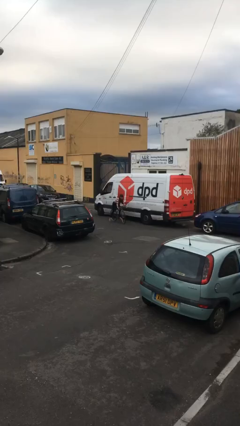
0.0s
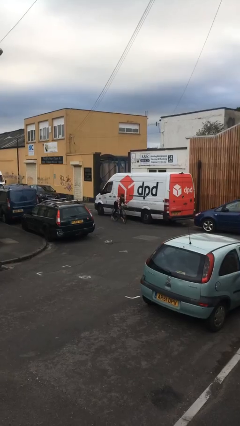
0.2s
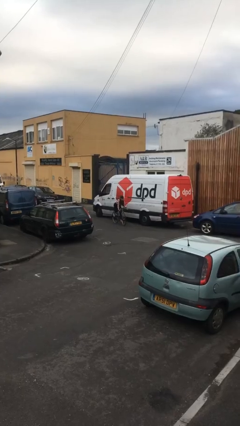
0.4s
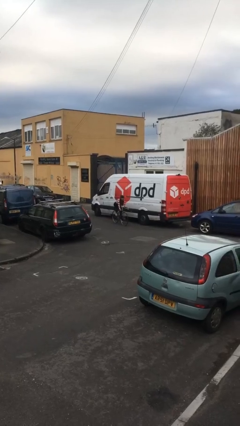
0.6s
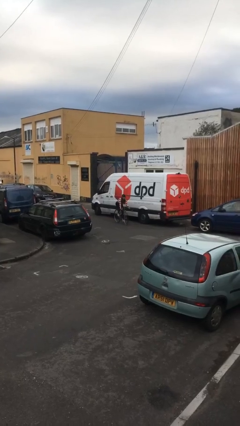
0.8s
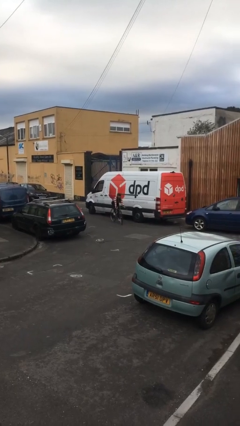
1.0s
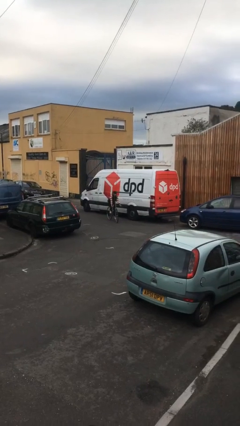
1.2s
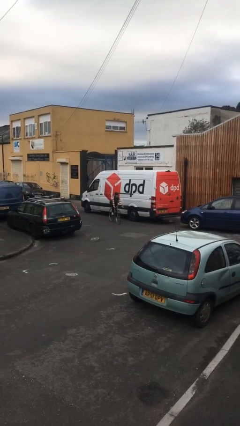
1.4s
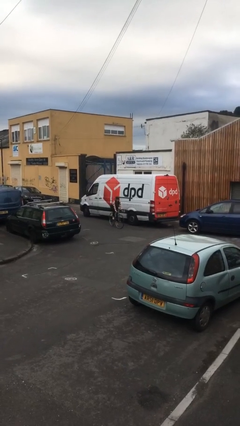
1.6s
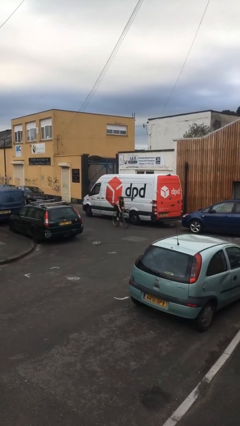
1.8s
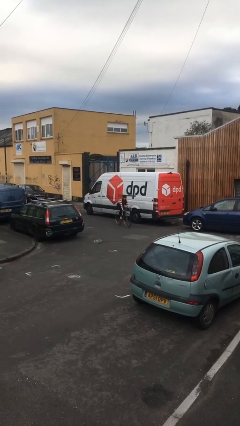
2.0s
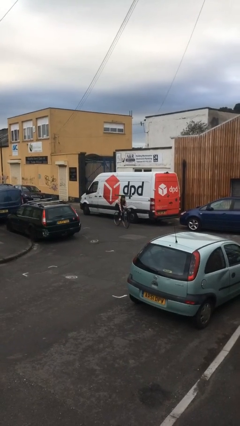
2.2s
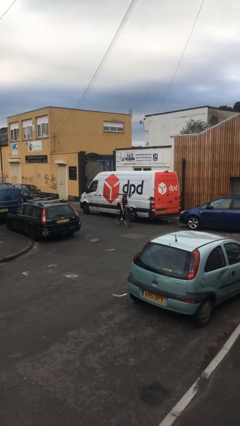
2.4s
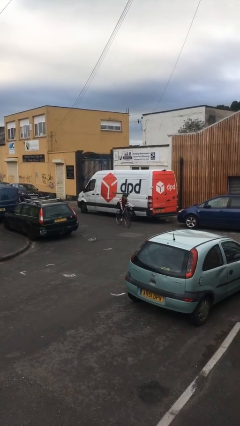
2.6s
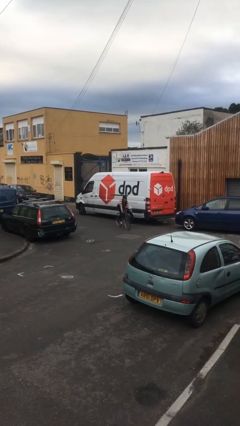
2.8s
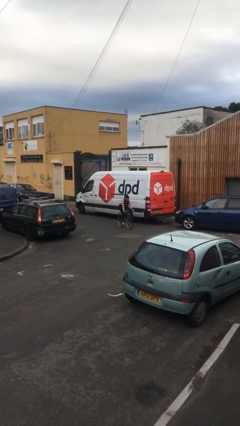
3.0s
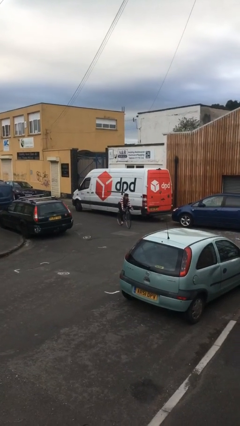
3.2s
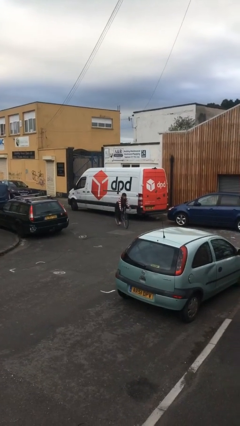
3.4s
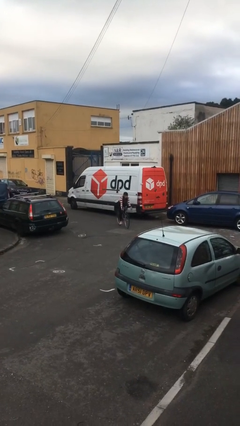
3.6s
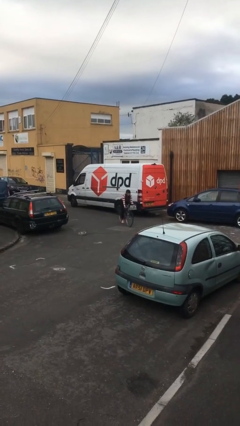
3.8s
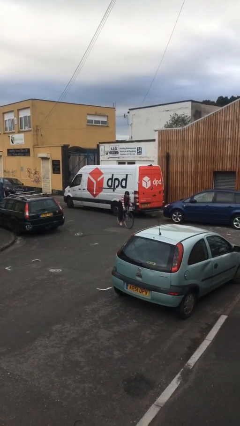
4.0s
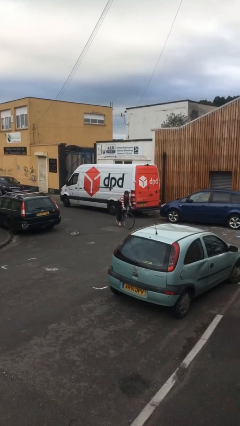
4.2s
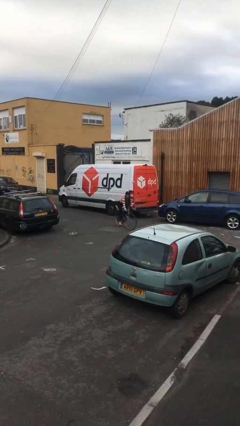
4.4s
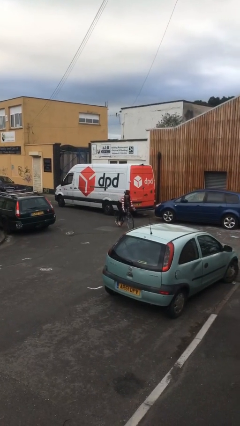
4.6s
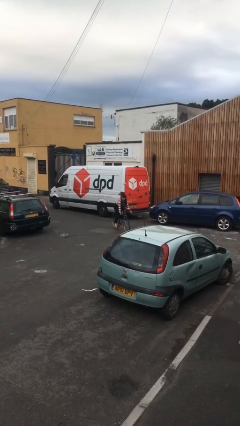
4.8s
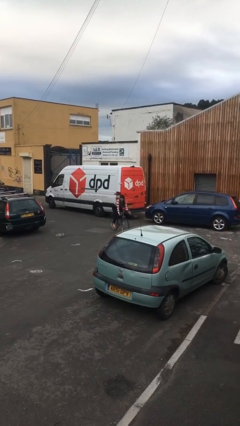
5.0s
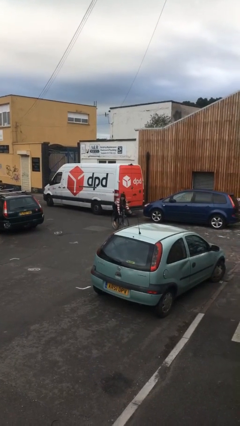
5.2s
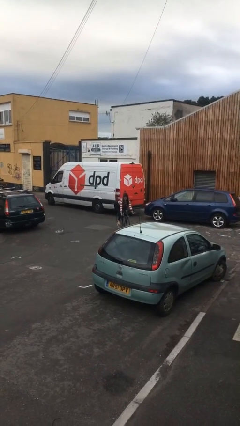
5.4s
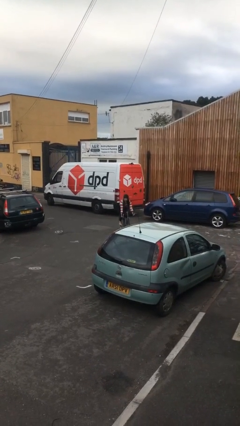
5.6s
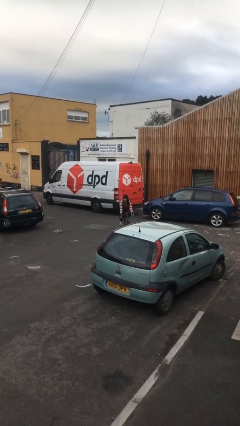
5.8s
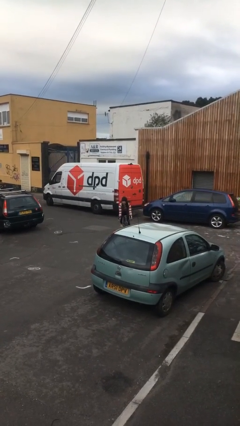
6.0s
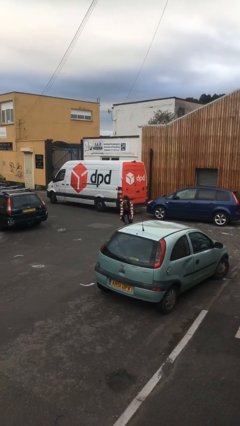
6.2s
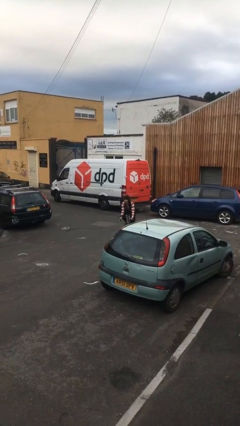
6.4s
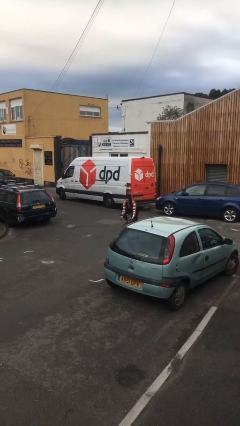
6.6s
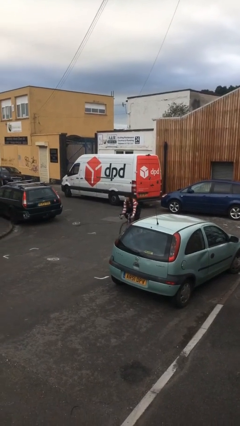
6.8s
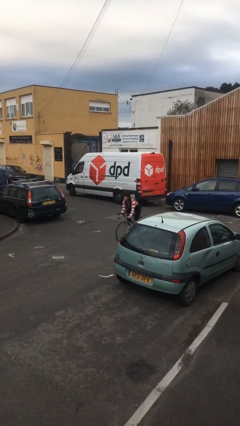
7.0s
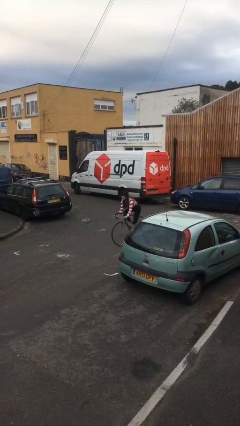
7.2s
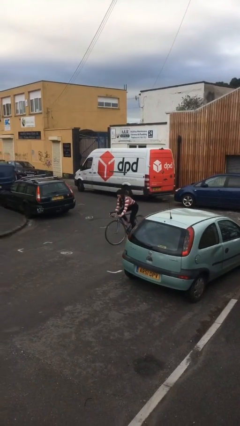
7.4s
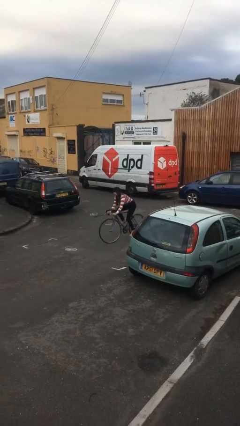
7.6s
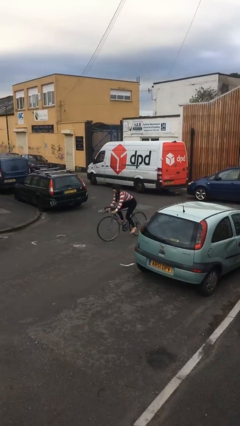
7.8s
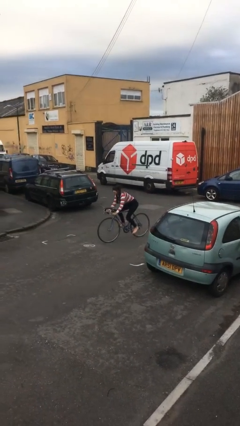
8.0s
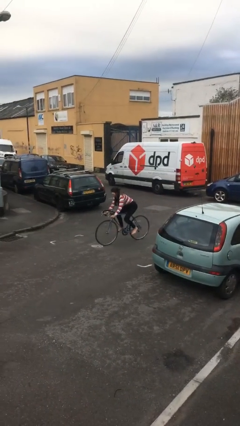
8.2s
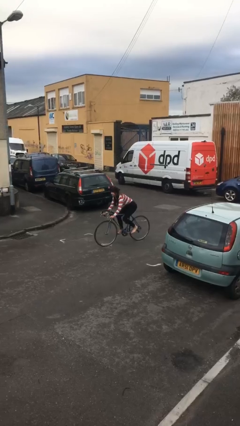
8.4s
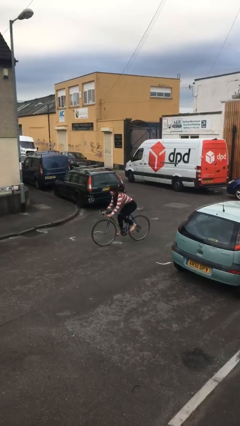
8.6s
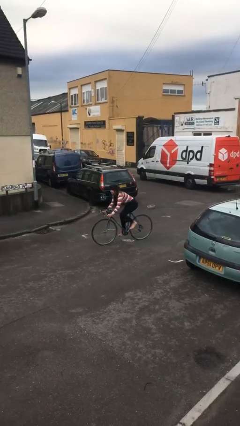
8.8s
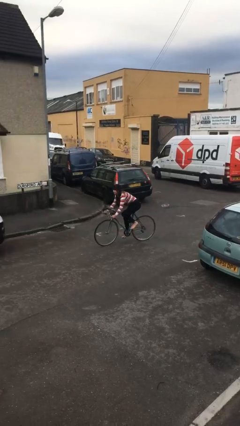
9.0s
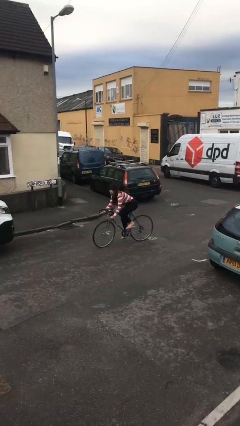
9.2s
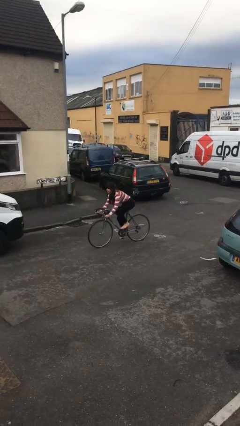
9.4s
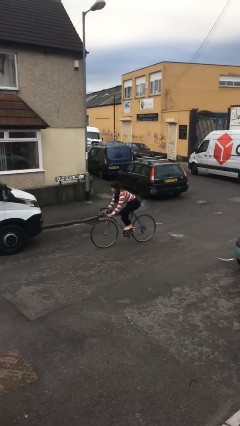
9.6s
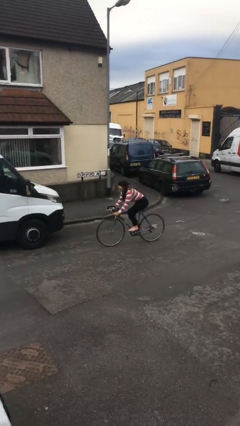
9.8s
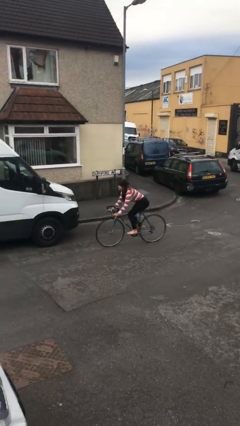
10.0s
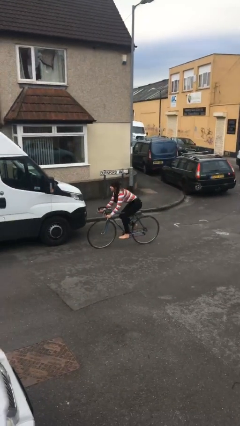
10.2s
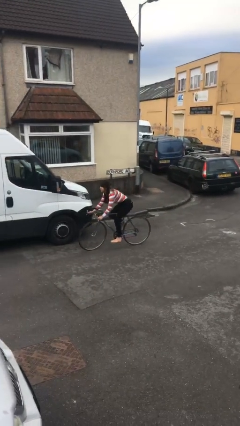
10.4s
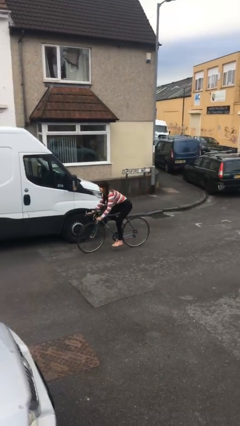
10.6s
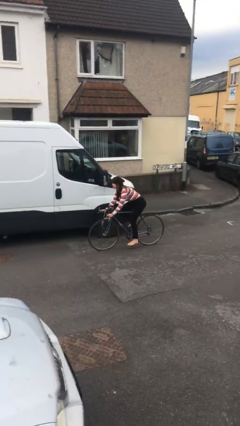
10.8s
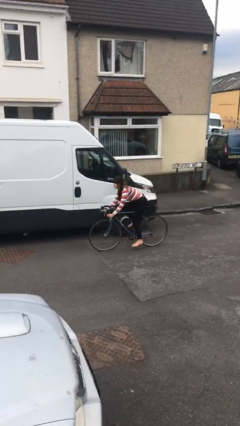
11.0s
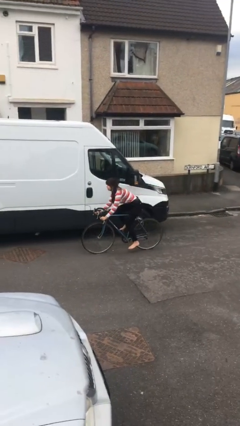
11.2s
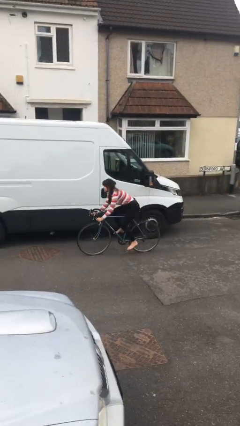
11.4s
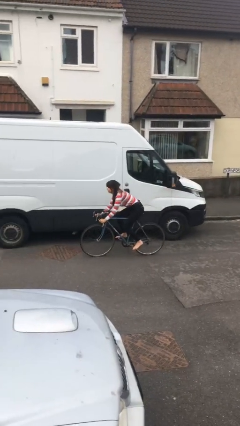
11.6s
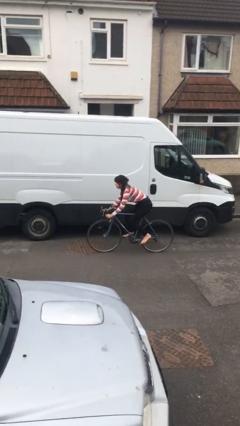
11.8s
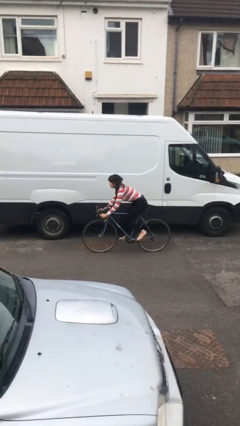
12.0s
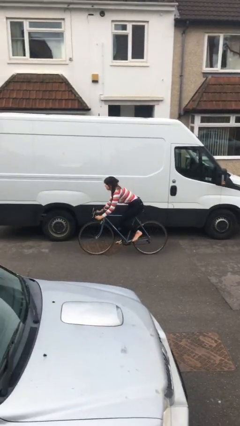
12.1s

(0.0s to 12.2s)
person rides bicycle

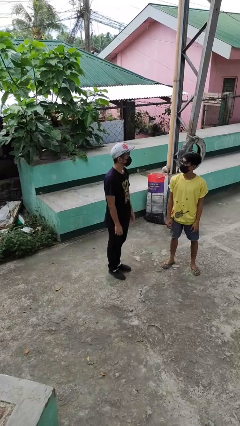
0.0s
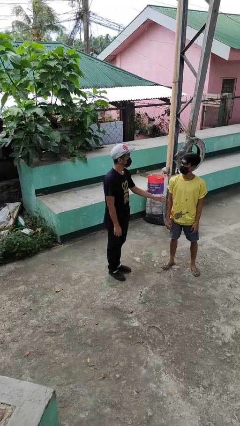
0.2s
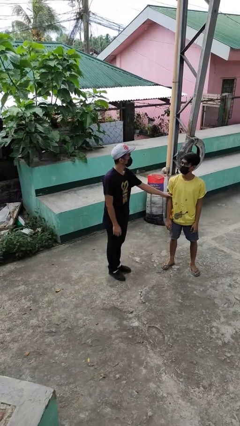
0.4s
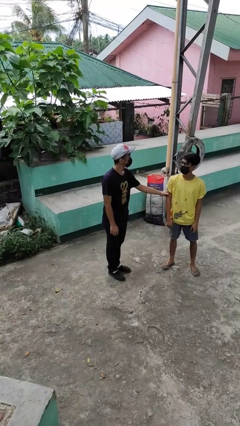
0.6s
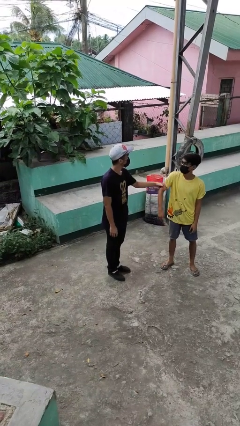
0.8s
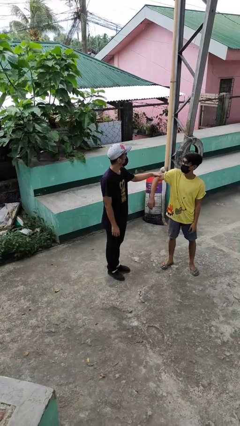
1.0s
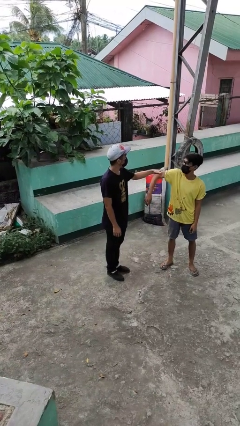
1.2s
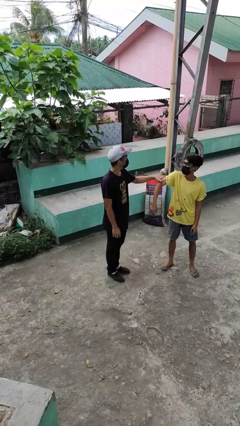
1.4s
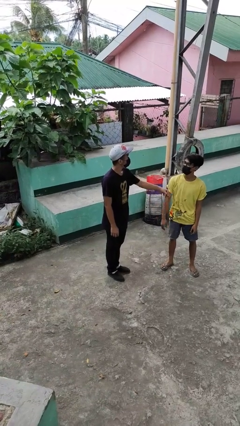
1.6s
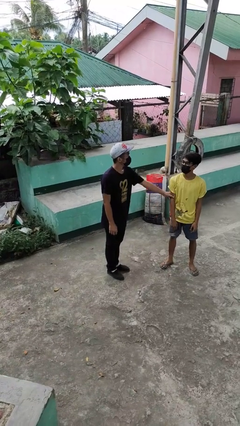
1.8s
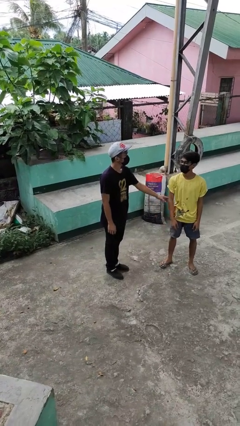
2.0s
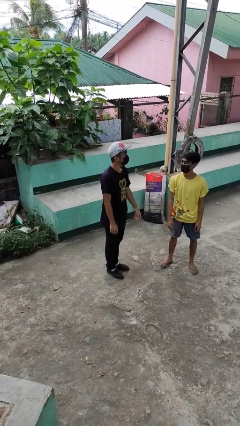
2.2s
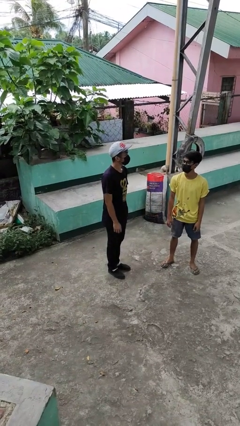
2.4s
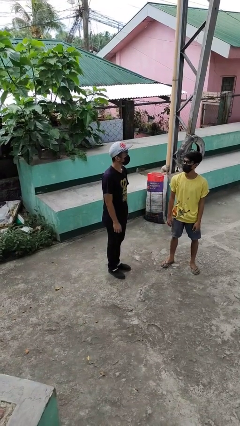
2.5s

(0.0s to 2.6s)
person grabs person by bicep

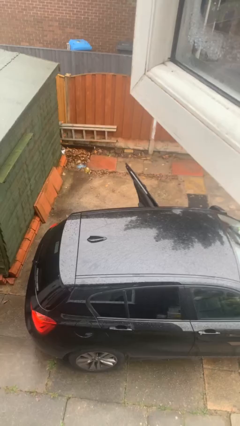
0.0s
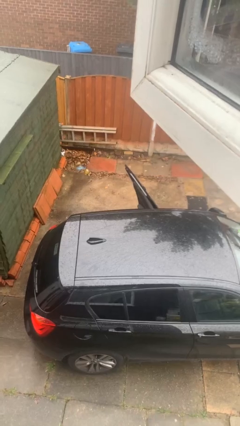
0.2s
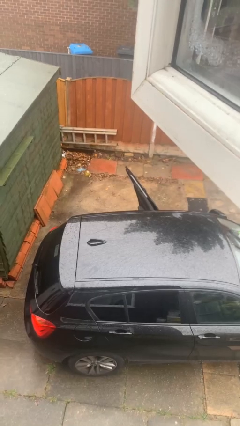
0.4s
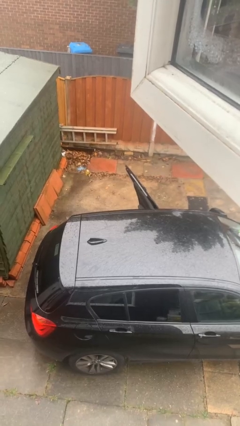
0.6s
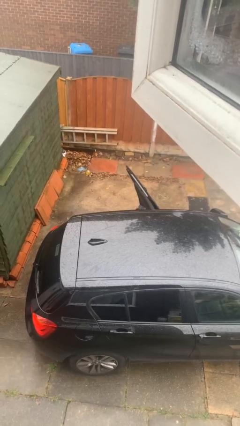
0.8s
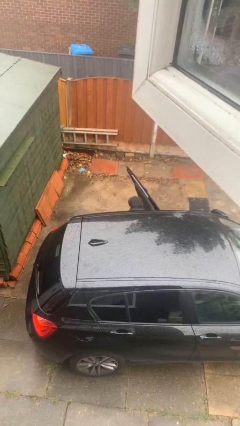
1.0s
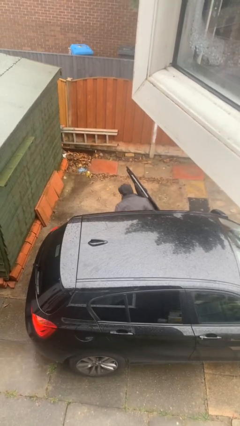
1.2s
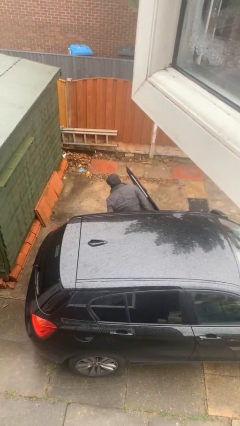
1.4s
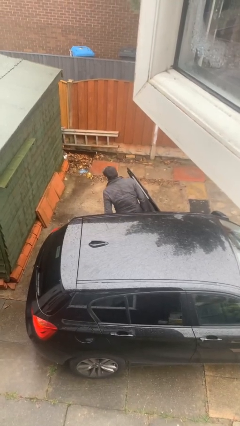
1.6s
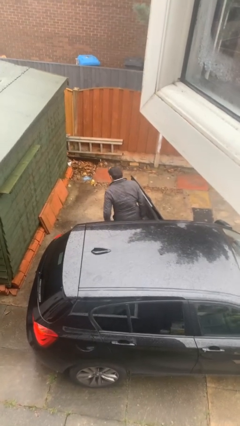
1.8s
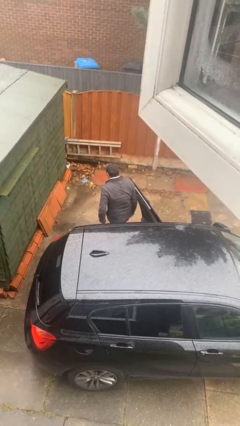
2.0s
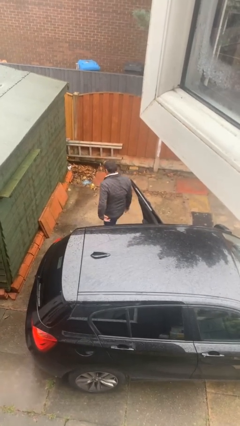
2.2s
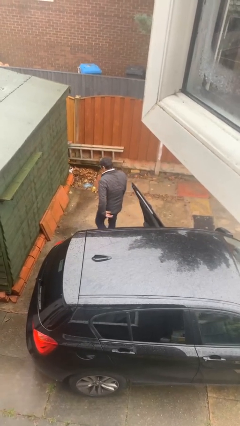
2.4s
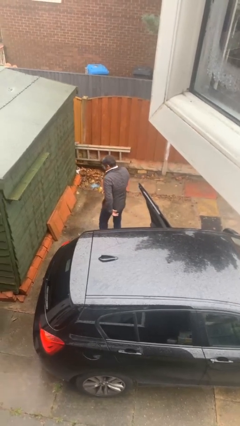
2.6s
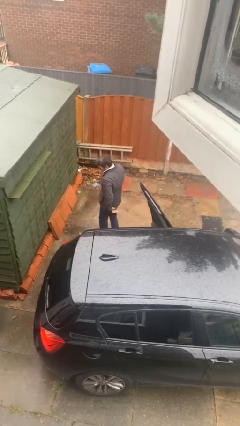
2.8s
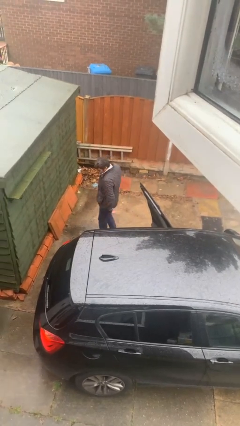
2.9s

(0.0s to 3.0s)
person exits car

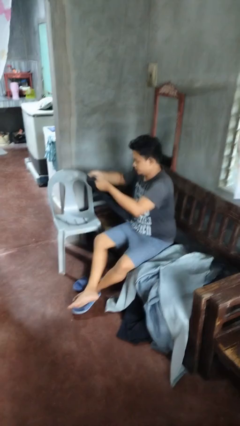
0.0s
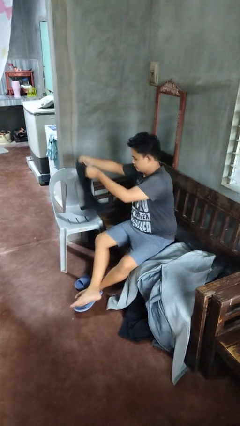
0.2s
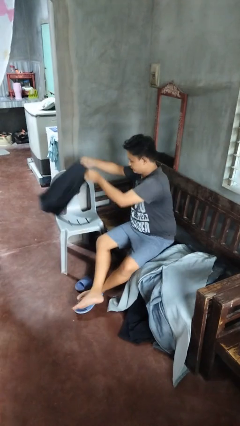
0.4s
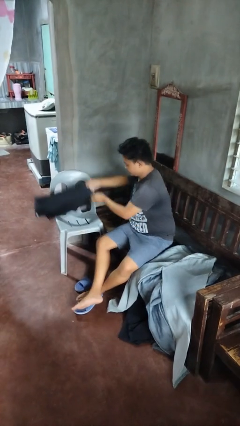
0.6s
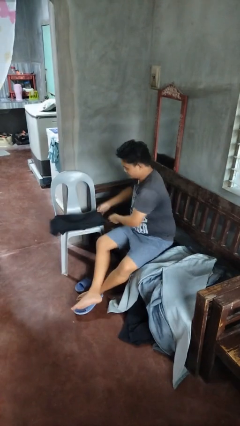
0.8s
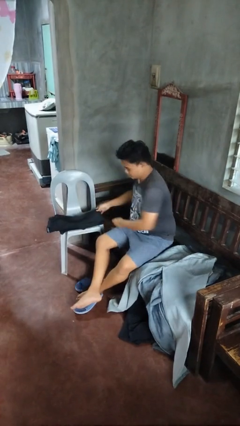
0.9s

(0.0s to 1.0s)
person folds pants
